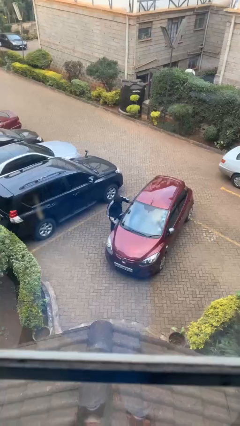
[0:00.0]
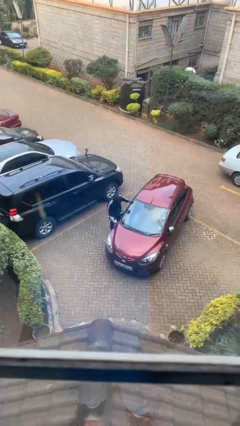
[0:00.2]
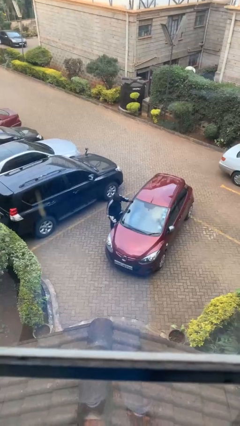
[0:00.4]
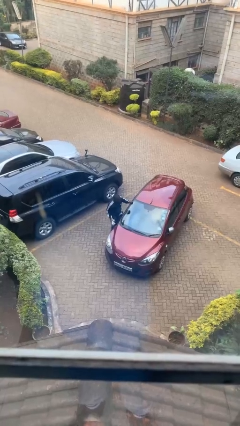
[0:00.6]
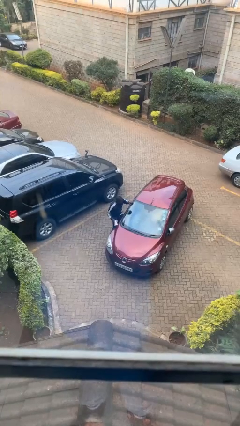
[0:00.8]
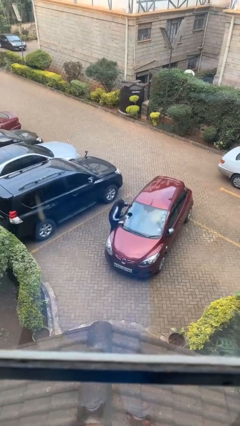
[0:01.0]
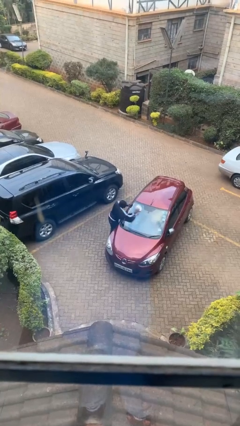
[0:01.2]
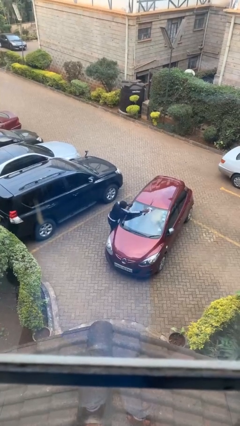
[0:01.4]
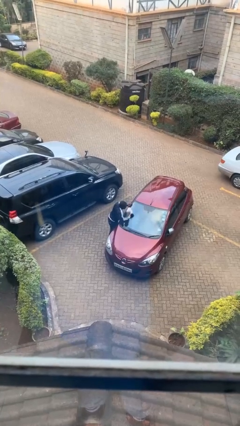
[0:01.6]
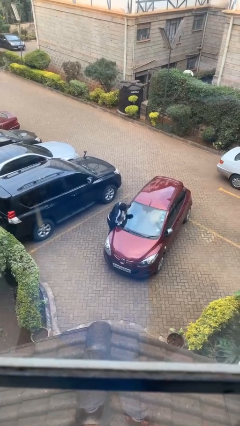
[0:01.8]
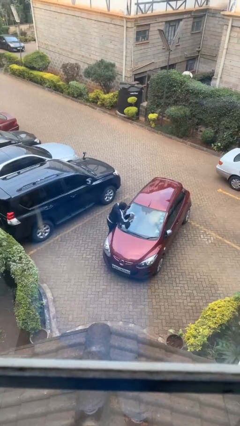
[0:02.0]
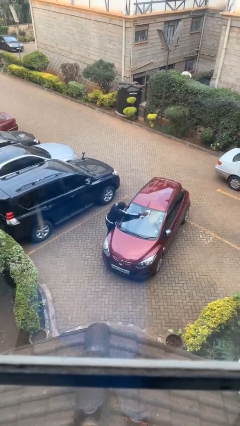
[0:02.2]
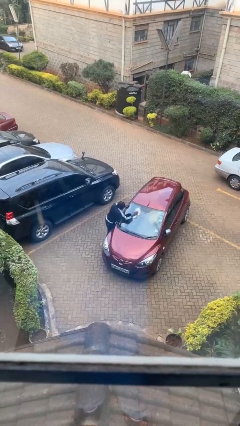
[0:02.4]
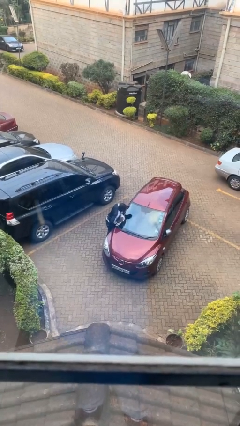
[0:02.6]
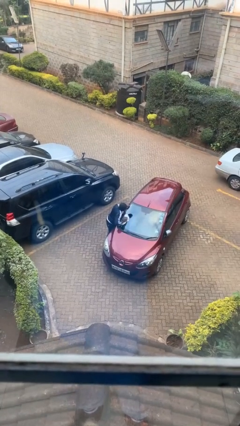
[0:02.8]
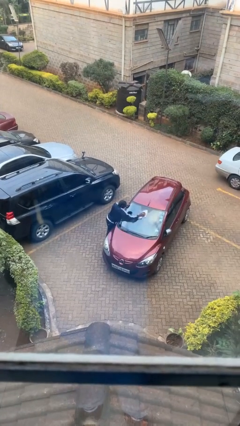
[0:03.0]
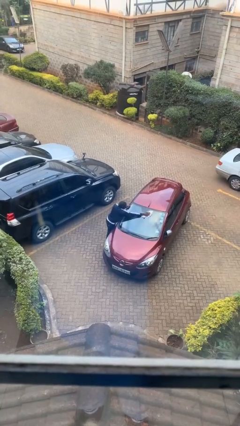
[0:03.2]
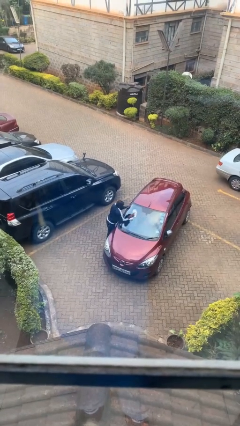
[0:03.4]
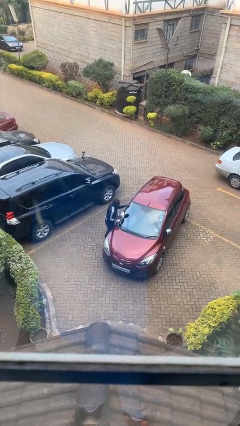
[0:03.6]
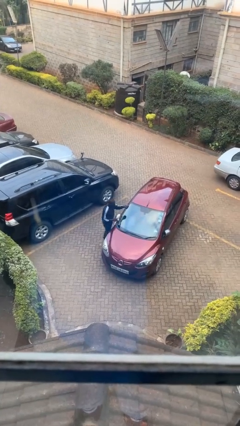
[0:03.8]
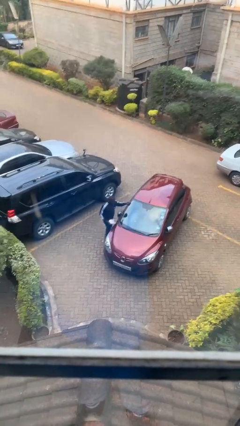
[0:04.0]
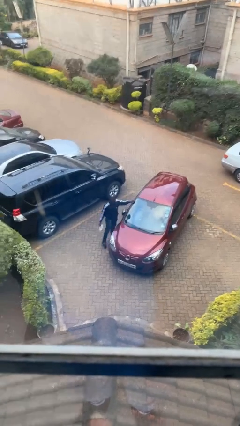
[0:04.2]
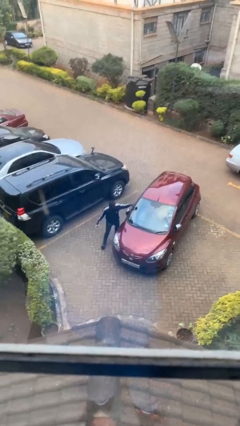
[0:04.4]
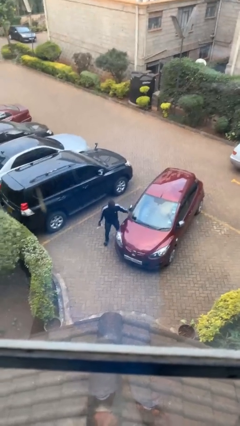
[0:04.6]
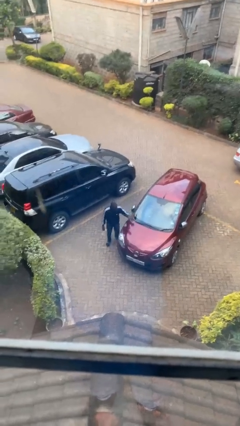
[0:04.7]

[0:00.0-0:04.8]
person polishes car with rag

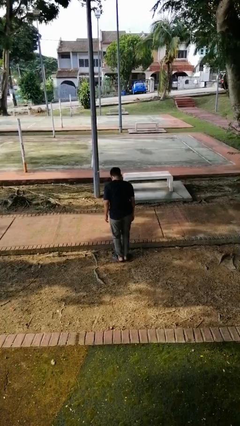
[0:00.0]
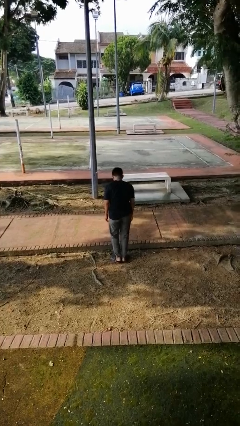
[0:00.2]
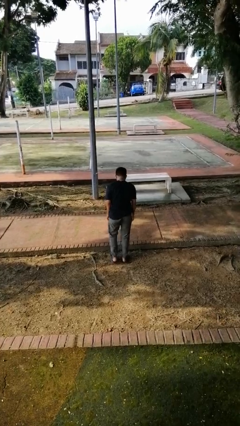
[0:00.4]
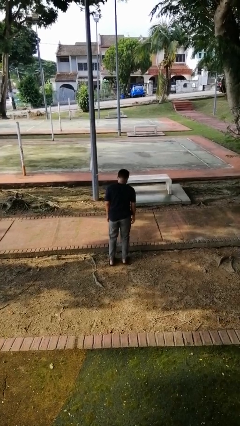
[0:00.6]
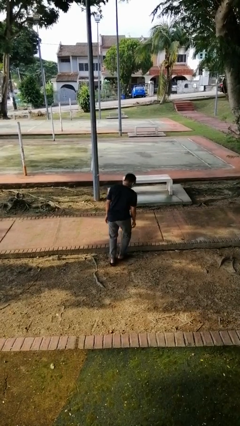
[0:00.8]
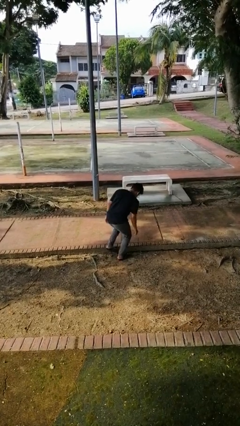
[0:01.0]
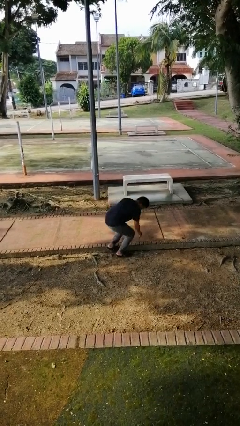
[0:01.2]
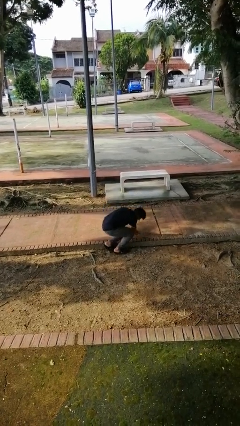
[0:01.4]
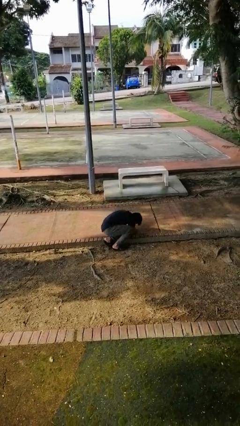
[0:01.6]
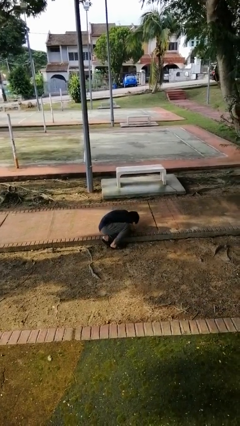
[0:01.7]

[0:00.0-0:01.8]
person trips on object on floor

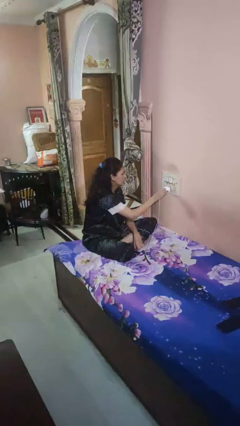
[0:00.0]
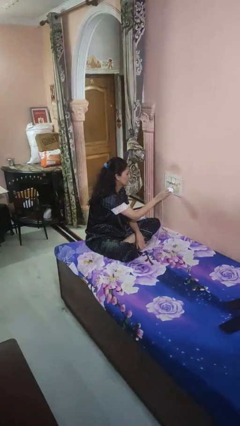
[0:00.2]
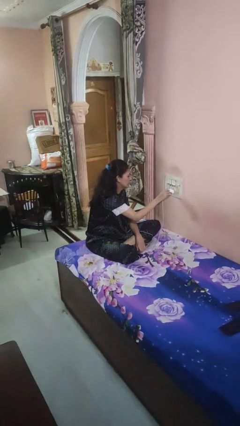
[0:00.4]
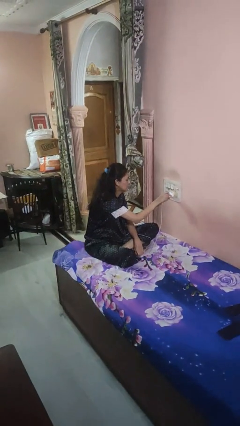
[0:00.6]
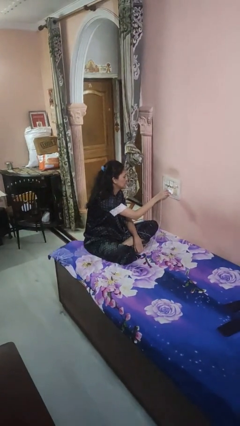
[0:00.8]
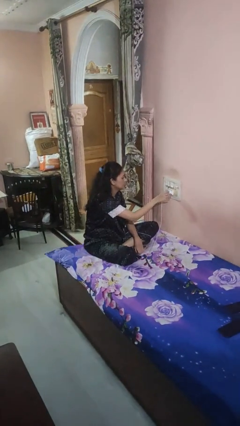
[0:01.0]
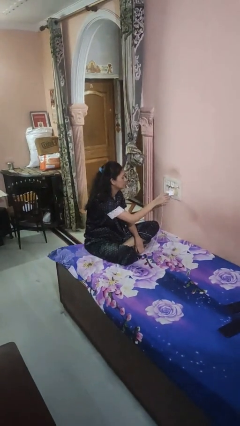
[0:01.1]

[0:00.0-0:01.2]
person plugs into electrical socket

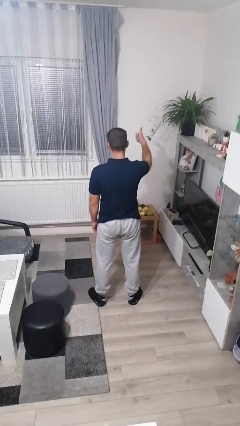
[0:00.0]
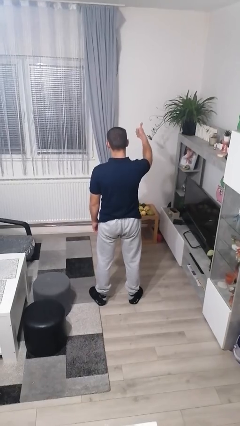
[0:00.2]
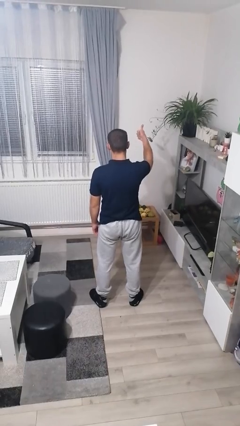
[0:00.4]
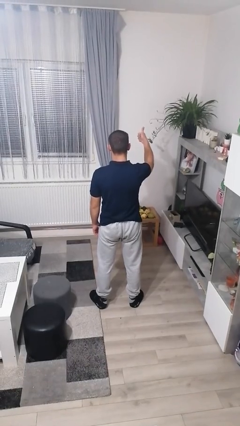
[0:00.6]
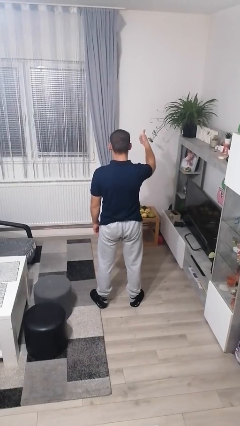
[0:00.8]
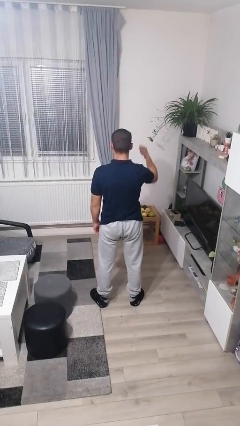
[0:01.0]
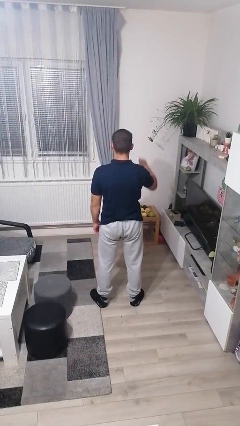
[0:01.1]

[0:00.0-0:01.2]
person gestures number one

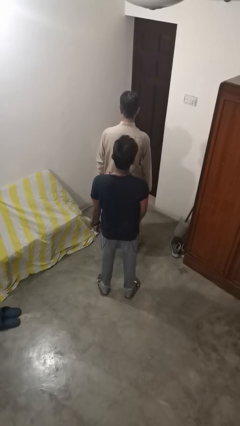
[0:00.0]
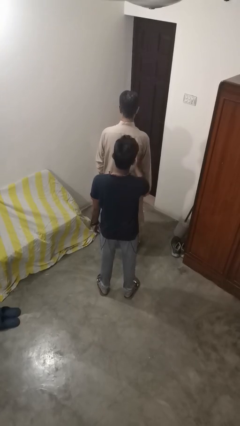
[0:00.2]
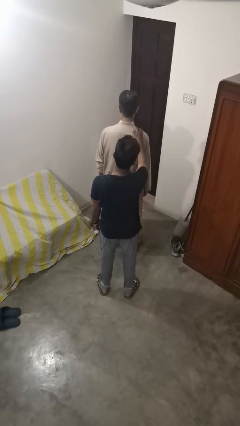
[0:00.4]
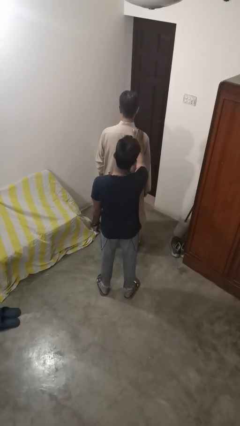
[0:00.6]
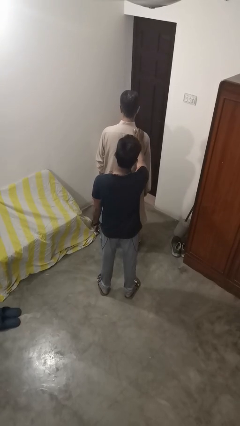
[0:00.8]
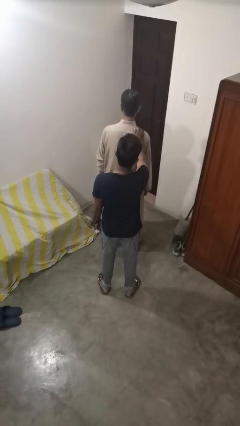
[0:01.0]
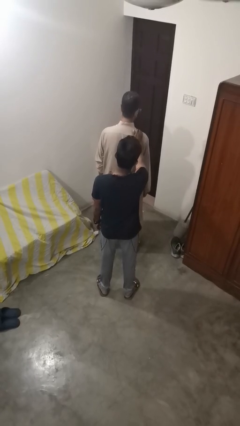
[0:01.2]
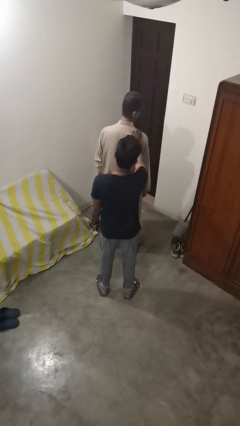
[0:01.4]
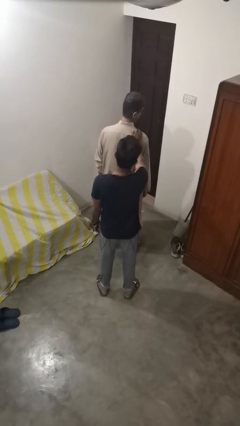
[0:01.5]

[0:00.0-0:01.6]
person grabs person by shoulder

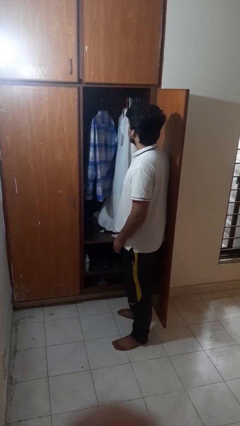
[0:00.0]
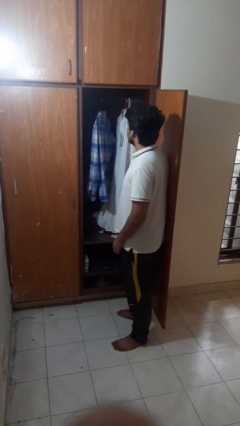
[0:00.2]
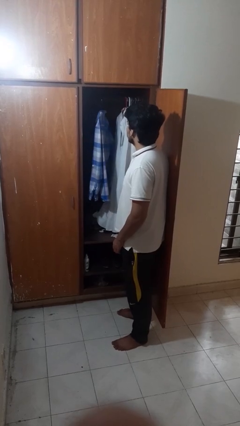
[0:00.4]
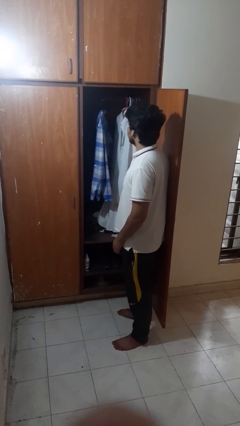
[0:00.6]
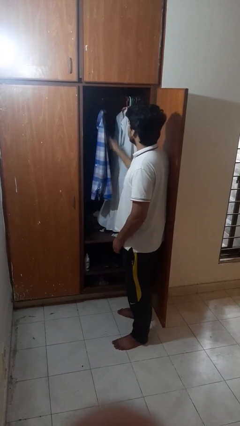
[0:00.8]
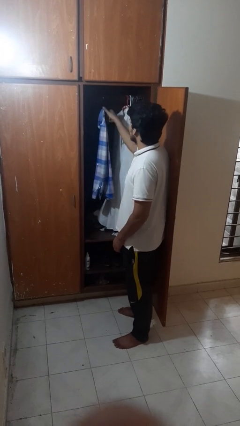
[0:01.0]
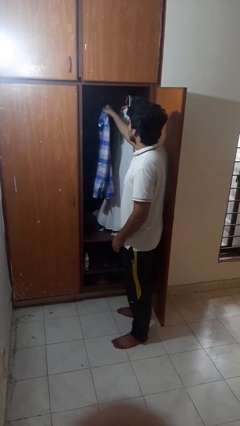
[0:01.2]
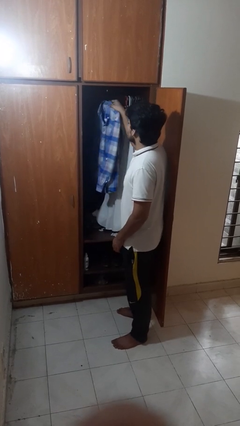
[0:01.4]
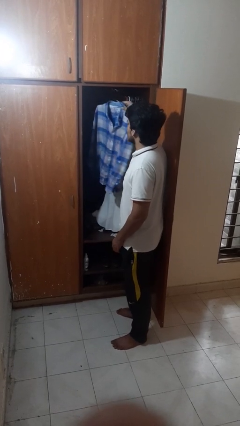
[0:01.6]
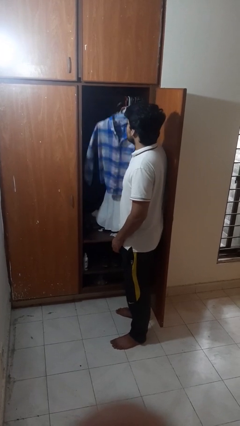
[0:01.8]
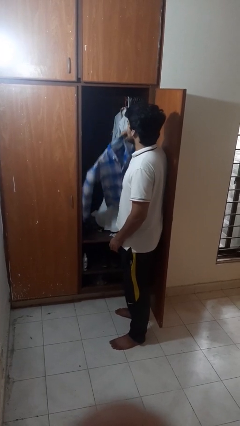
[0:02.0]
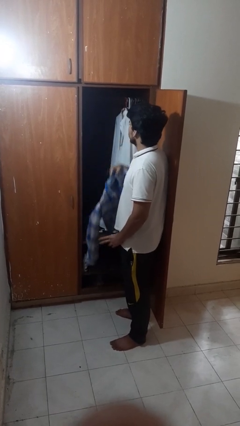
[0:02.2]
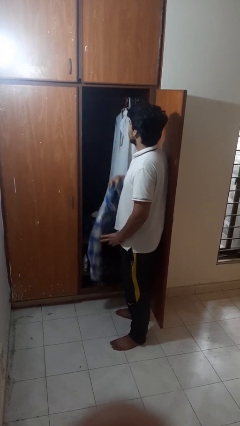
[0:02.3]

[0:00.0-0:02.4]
person takes clothes from closet

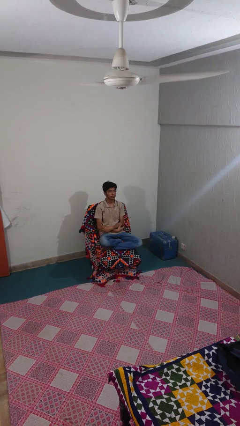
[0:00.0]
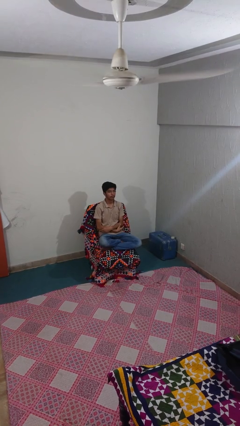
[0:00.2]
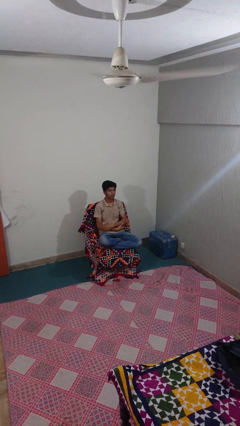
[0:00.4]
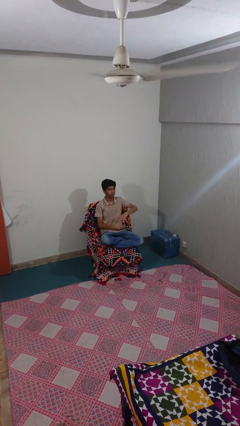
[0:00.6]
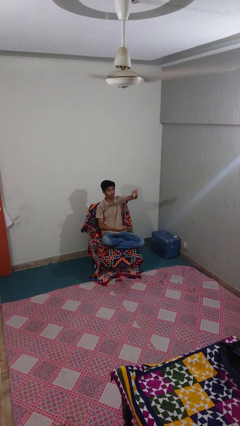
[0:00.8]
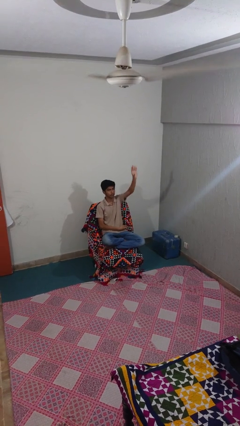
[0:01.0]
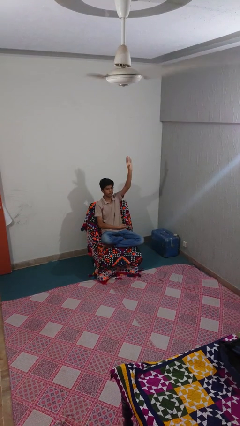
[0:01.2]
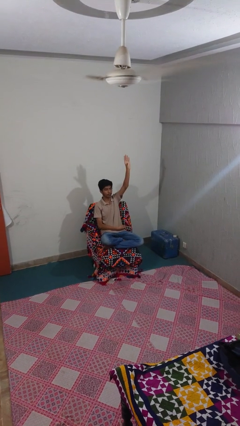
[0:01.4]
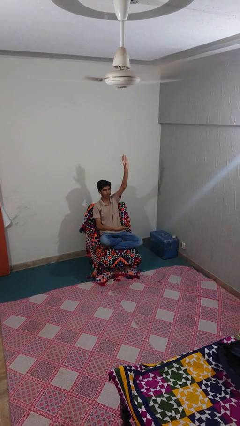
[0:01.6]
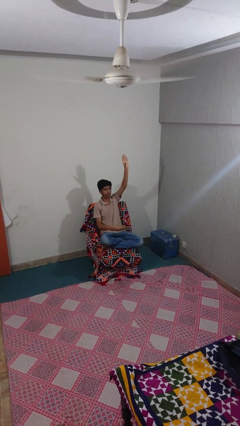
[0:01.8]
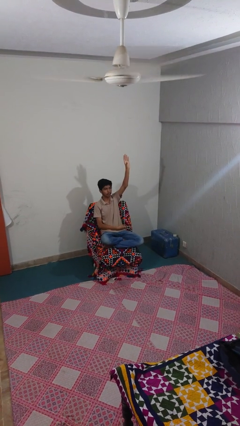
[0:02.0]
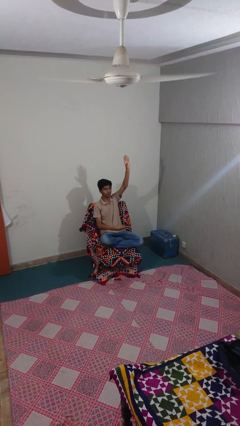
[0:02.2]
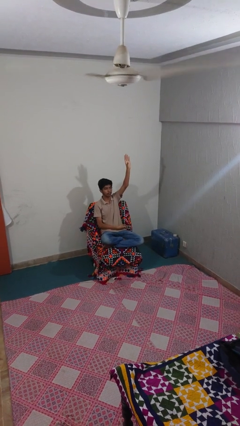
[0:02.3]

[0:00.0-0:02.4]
person gestures raise hand

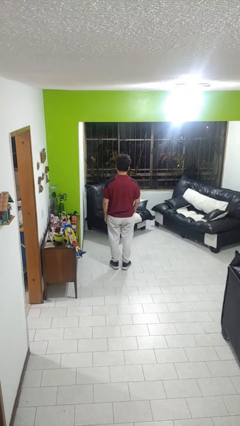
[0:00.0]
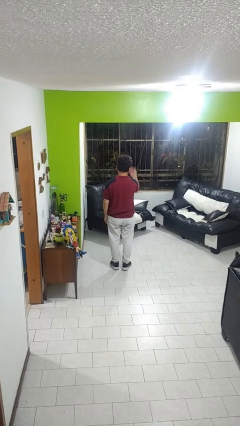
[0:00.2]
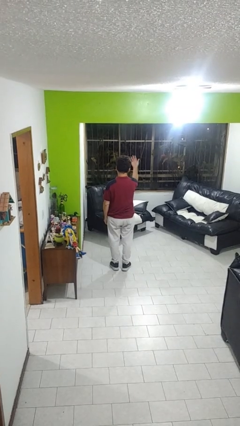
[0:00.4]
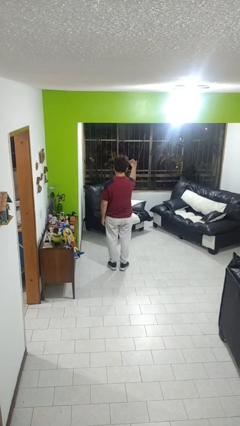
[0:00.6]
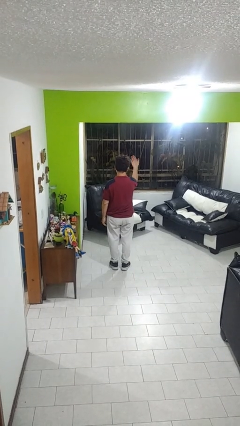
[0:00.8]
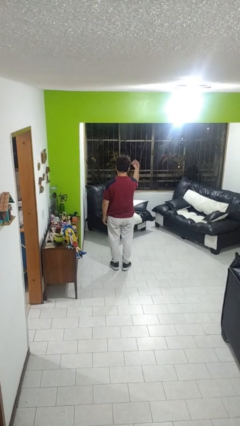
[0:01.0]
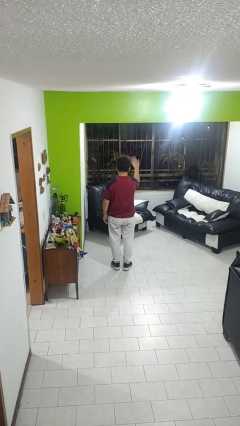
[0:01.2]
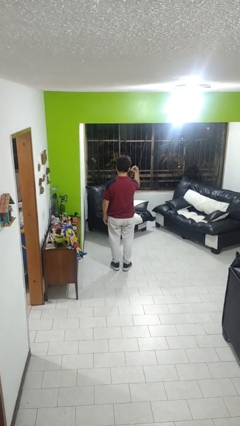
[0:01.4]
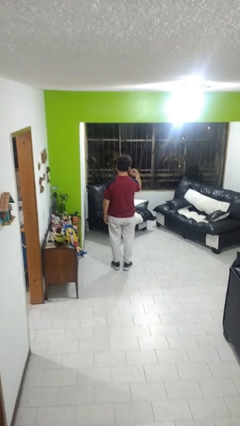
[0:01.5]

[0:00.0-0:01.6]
person gestures come here
